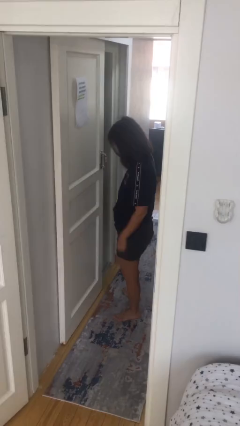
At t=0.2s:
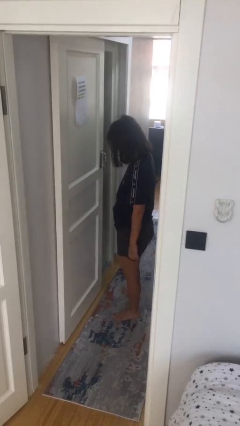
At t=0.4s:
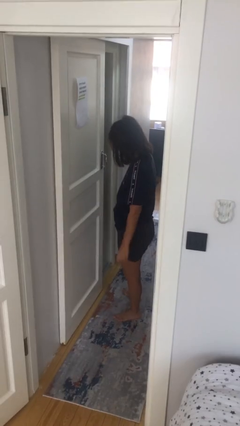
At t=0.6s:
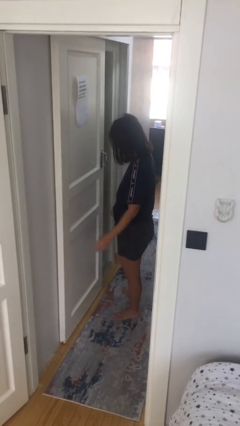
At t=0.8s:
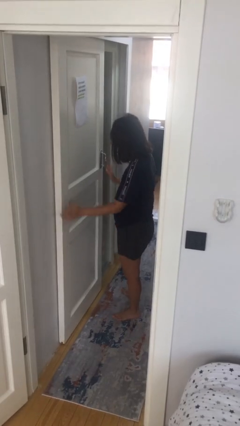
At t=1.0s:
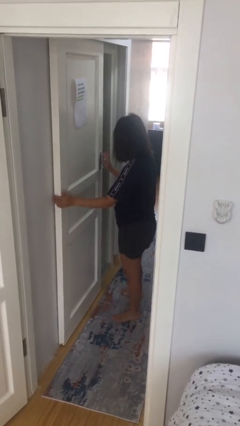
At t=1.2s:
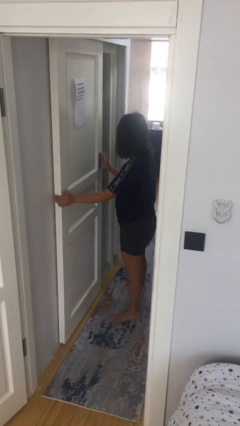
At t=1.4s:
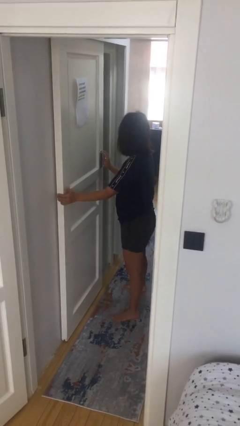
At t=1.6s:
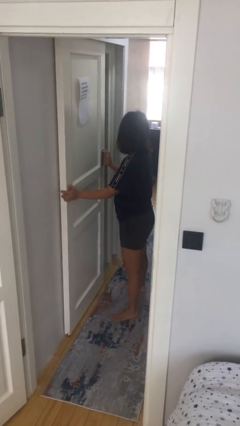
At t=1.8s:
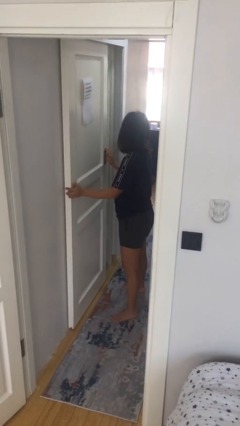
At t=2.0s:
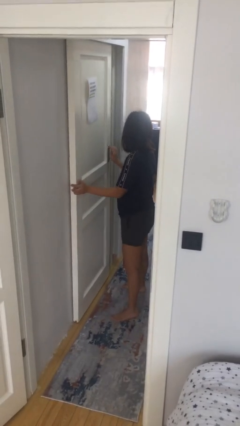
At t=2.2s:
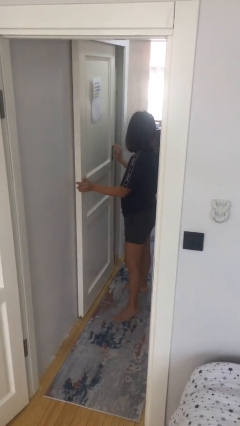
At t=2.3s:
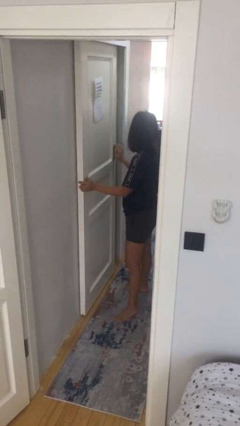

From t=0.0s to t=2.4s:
person closes sliding door

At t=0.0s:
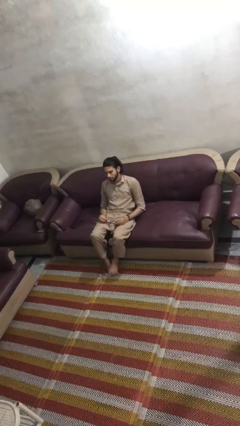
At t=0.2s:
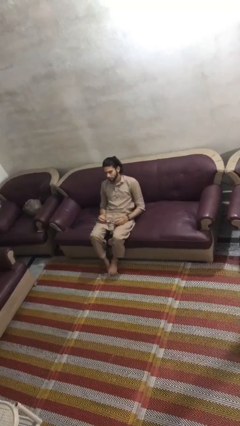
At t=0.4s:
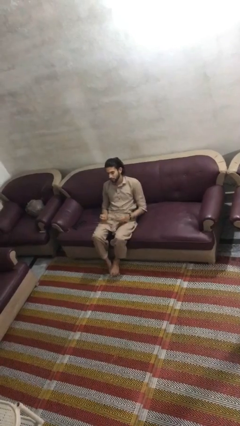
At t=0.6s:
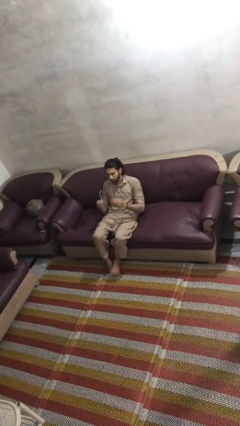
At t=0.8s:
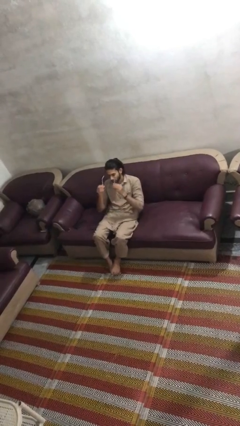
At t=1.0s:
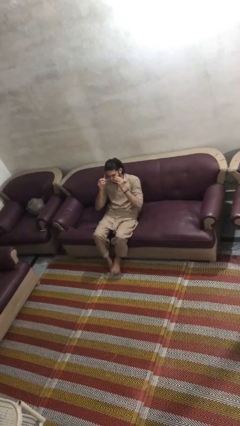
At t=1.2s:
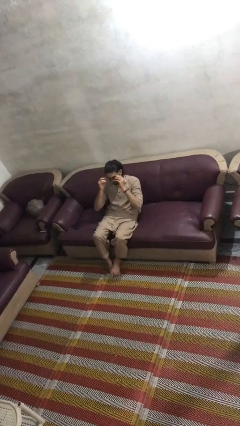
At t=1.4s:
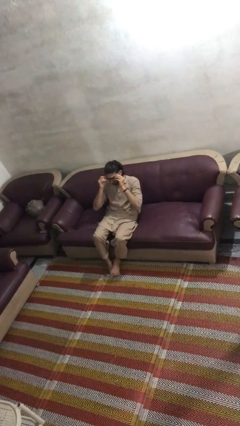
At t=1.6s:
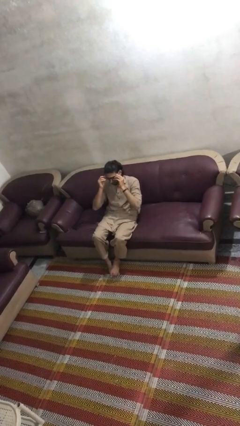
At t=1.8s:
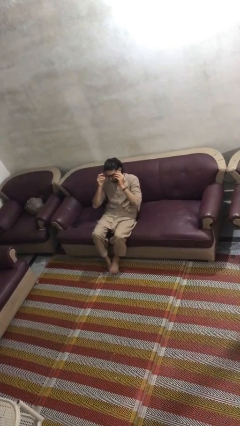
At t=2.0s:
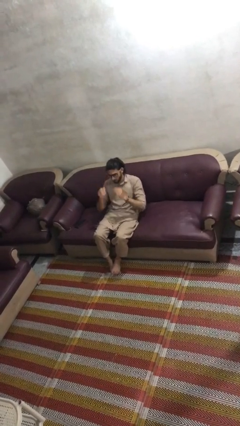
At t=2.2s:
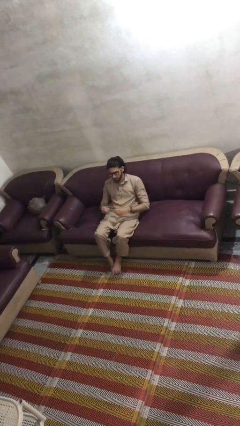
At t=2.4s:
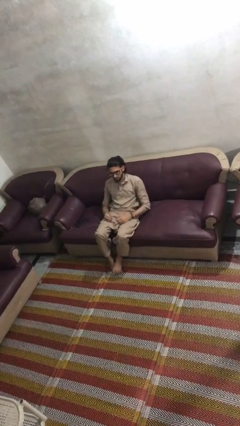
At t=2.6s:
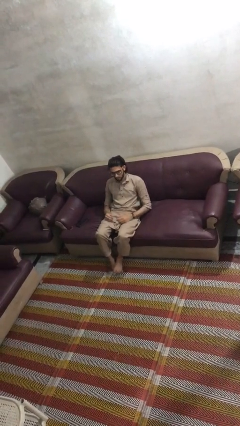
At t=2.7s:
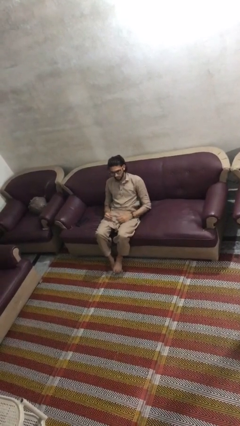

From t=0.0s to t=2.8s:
person puts on glasses

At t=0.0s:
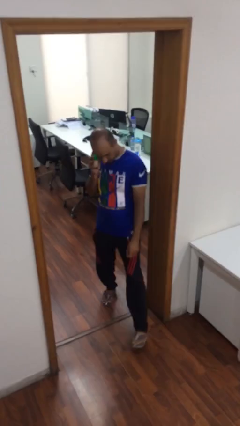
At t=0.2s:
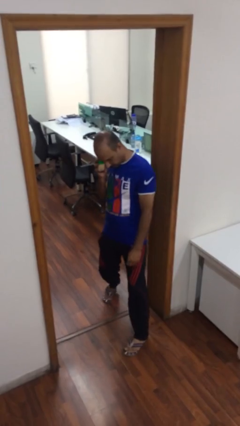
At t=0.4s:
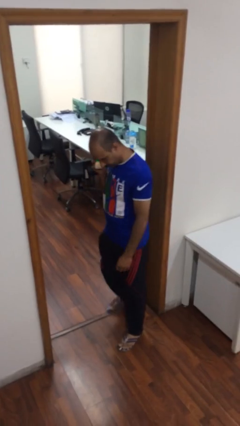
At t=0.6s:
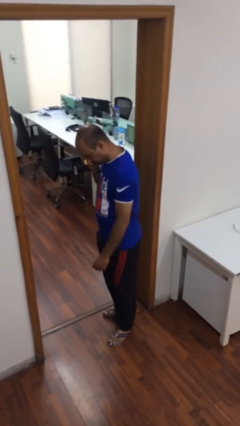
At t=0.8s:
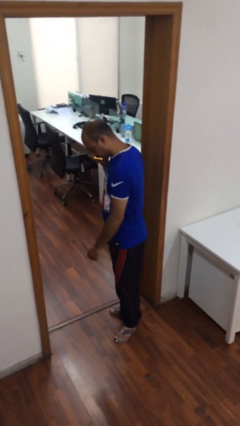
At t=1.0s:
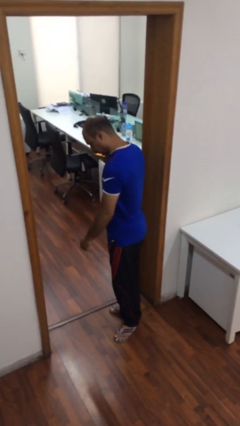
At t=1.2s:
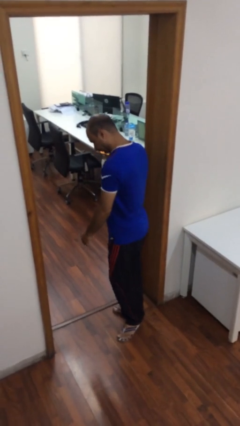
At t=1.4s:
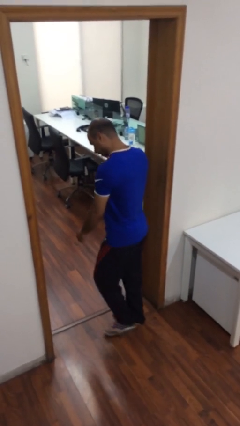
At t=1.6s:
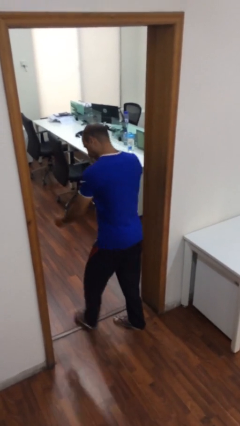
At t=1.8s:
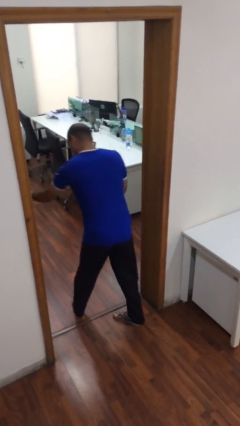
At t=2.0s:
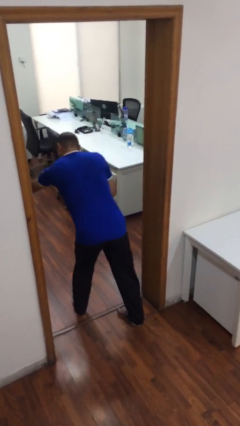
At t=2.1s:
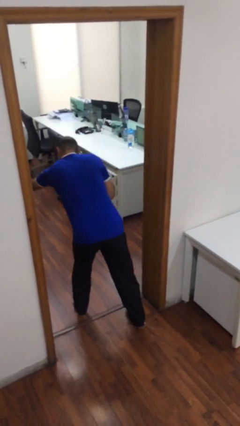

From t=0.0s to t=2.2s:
person enters scene through structure

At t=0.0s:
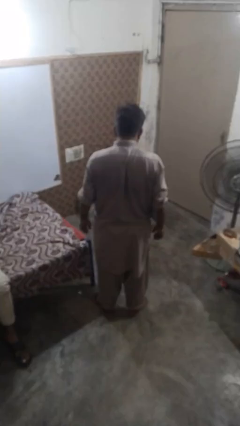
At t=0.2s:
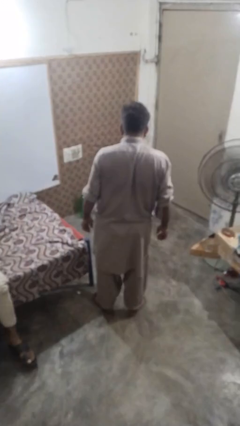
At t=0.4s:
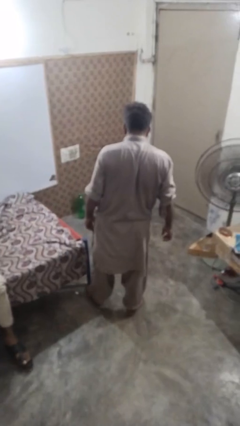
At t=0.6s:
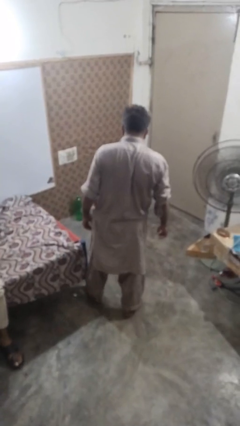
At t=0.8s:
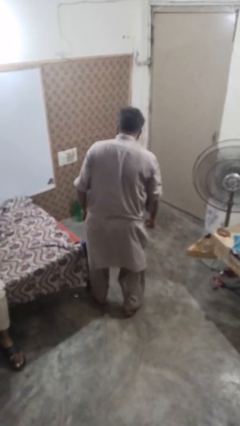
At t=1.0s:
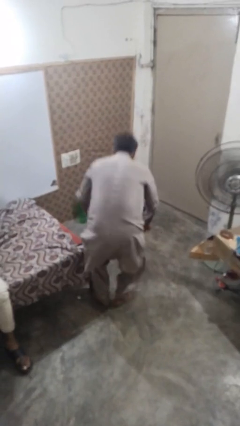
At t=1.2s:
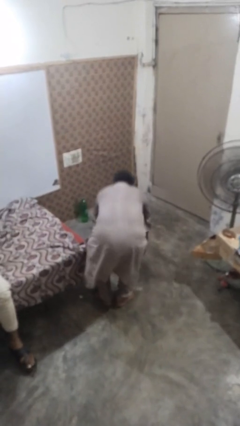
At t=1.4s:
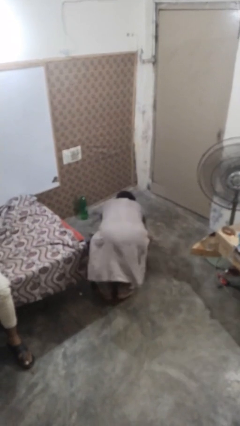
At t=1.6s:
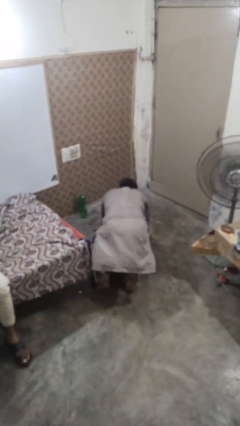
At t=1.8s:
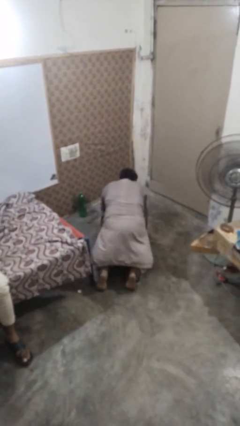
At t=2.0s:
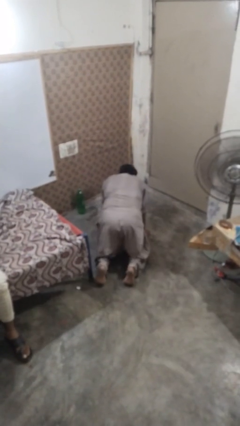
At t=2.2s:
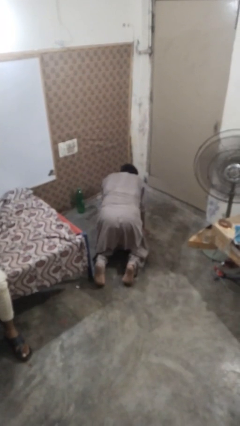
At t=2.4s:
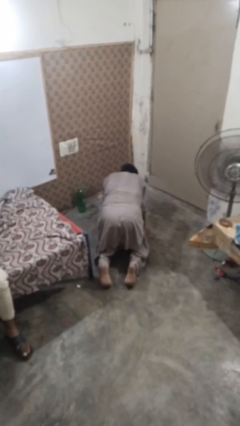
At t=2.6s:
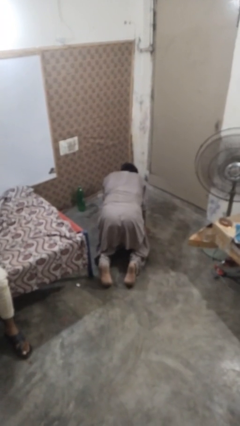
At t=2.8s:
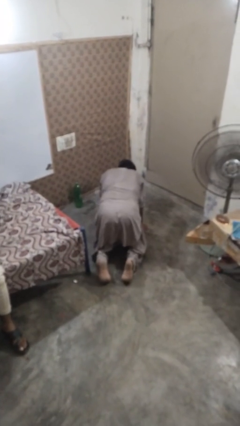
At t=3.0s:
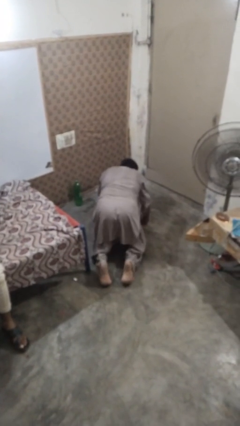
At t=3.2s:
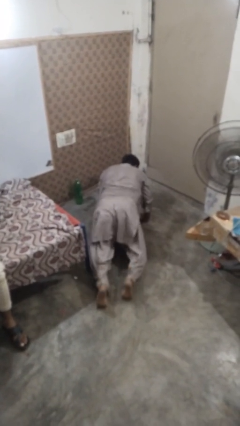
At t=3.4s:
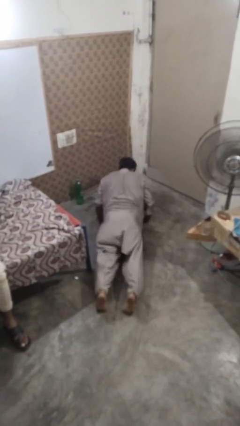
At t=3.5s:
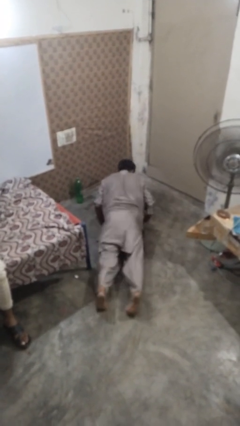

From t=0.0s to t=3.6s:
person trips on object on floor

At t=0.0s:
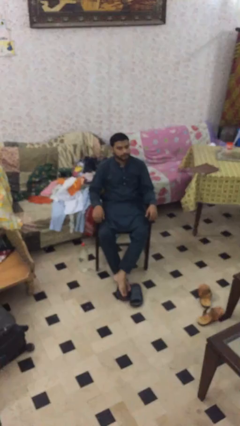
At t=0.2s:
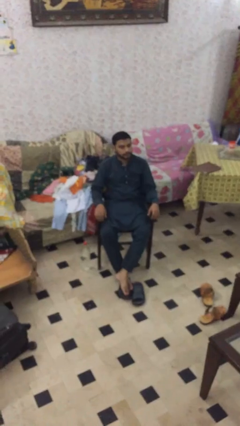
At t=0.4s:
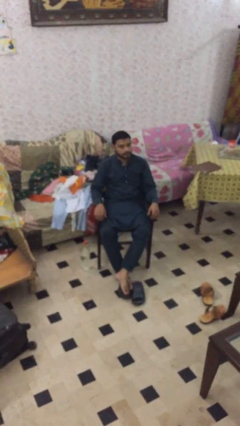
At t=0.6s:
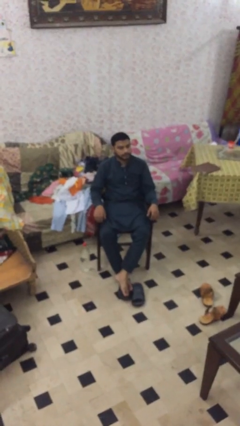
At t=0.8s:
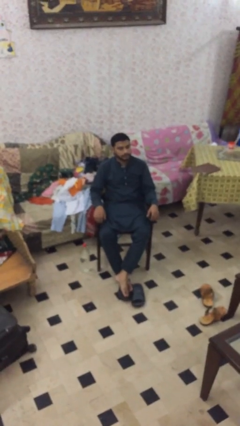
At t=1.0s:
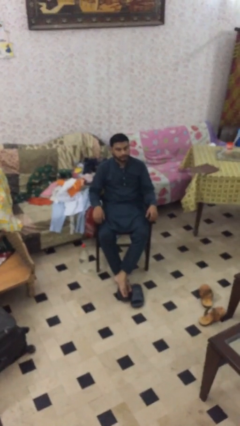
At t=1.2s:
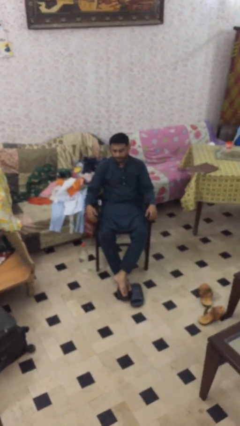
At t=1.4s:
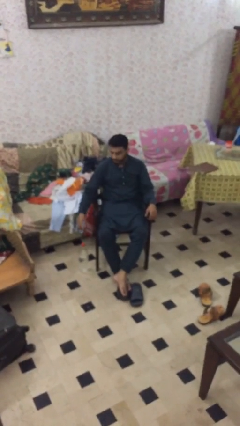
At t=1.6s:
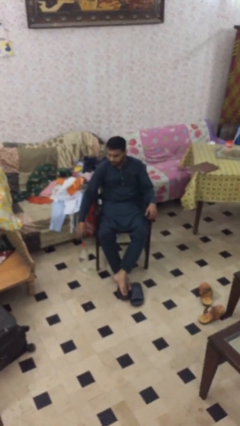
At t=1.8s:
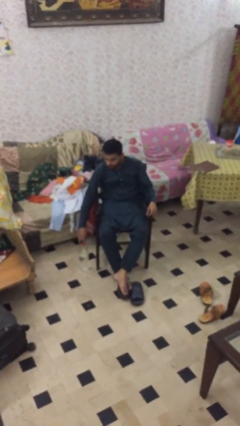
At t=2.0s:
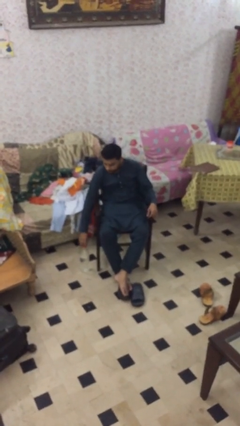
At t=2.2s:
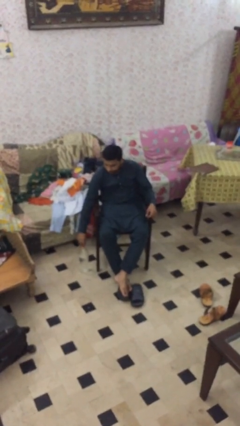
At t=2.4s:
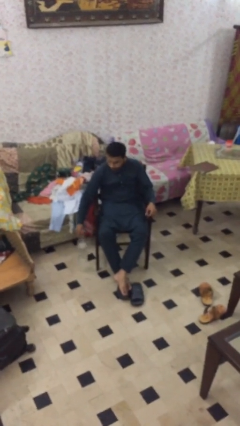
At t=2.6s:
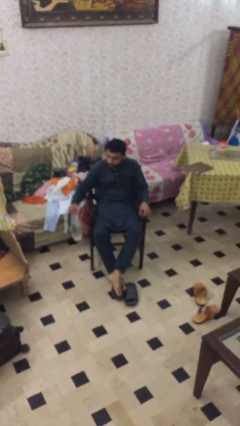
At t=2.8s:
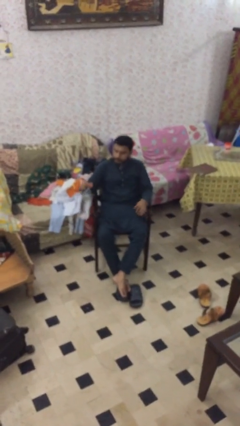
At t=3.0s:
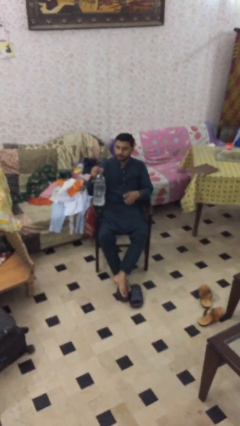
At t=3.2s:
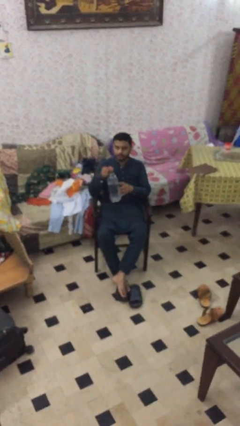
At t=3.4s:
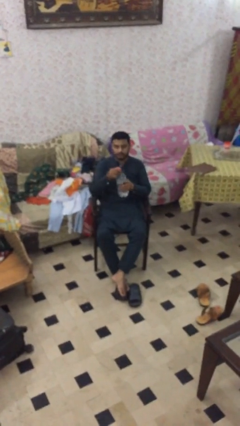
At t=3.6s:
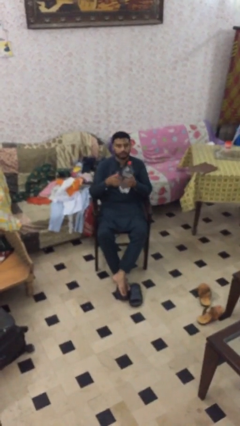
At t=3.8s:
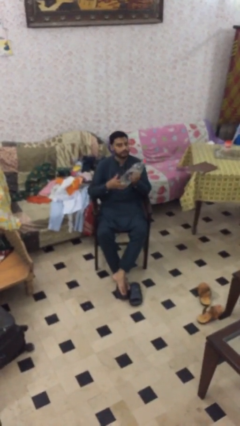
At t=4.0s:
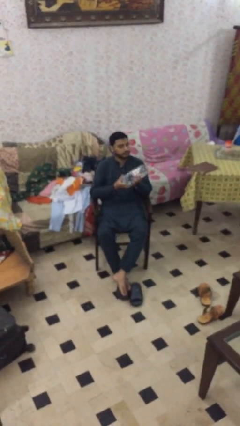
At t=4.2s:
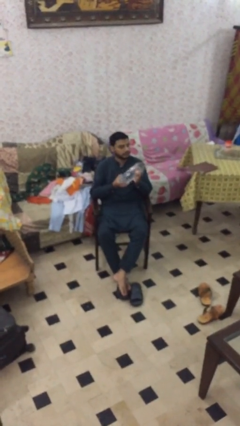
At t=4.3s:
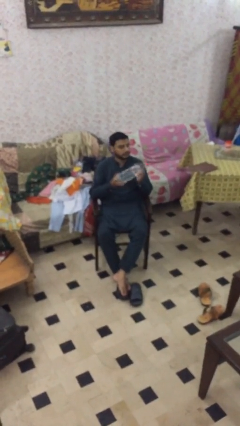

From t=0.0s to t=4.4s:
person picks up object from floor

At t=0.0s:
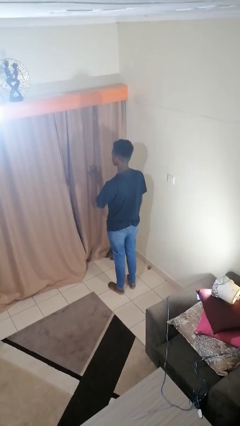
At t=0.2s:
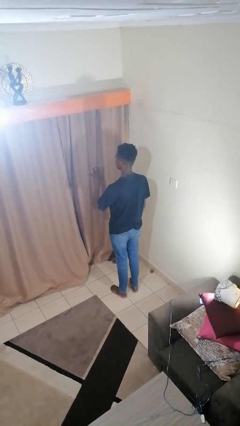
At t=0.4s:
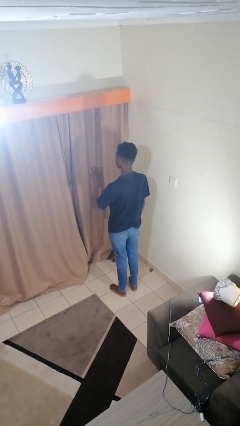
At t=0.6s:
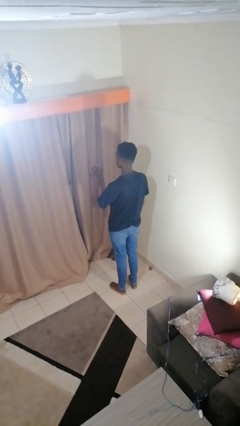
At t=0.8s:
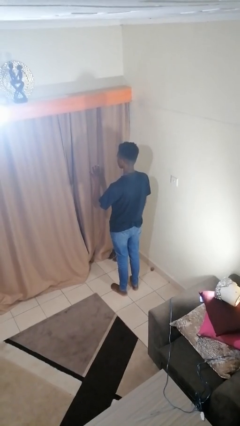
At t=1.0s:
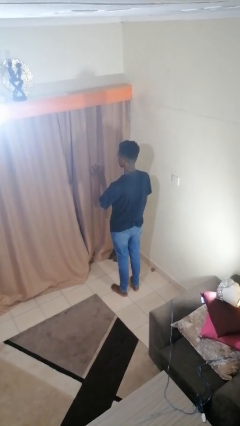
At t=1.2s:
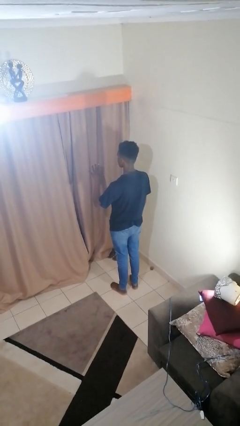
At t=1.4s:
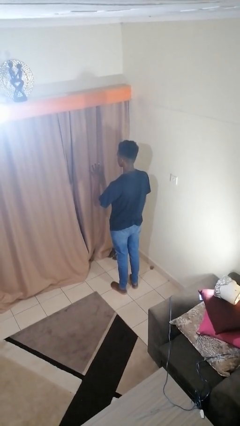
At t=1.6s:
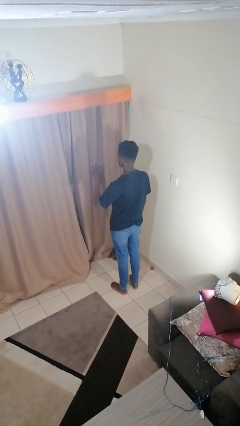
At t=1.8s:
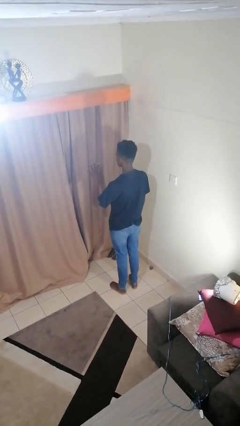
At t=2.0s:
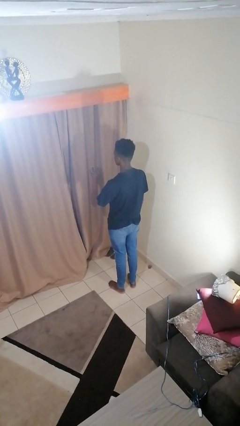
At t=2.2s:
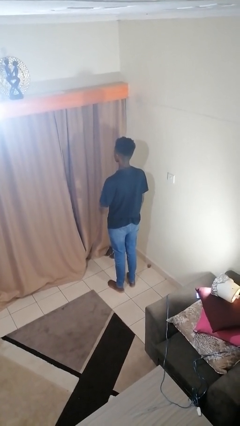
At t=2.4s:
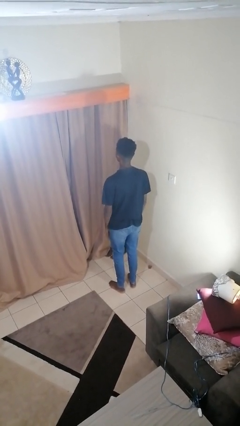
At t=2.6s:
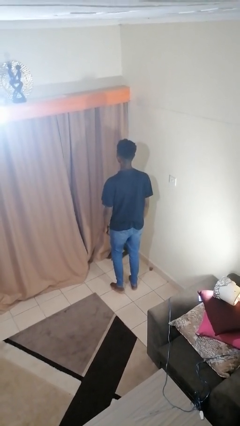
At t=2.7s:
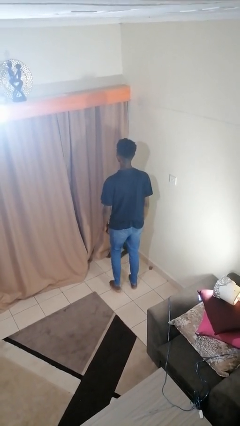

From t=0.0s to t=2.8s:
person gestures number four
